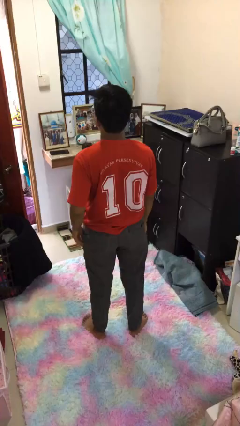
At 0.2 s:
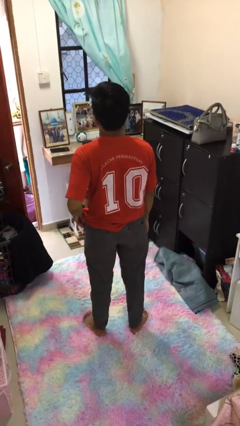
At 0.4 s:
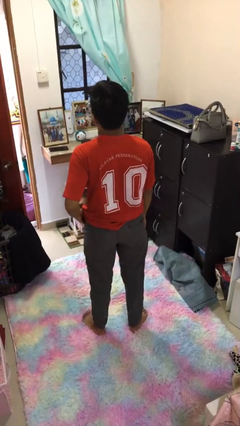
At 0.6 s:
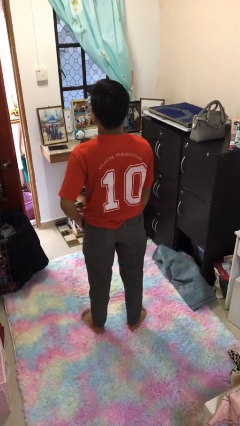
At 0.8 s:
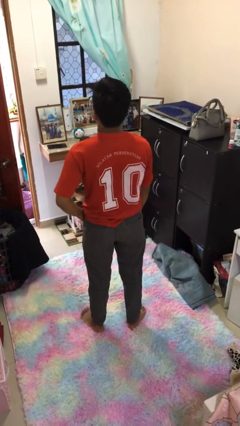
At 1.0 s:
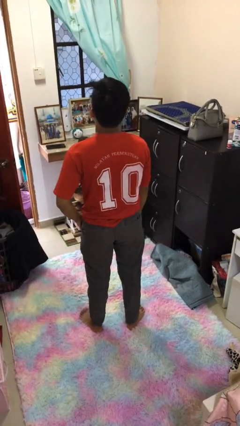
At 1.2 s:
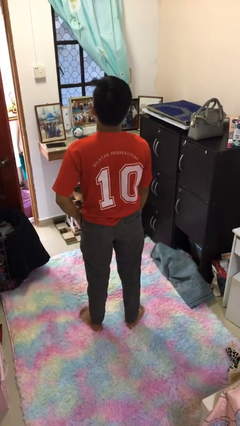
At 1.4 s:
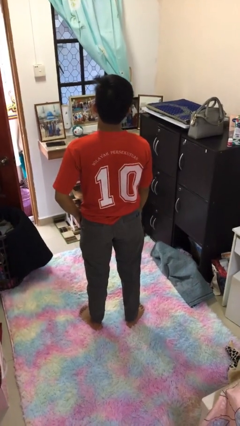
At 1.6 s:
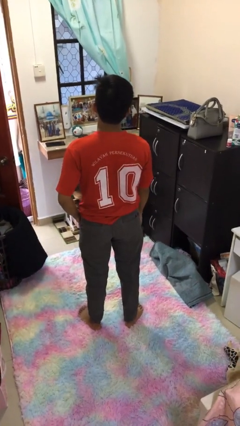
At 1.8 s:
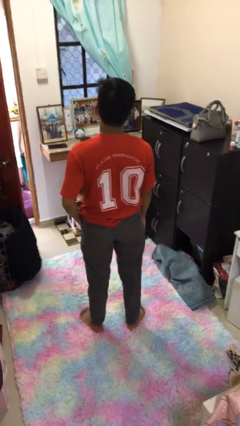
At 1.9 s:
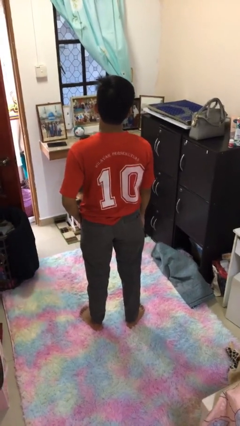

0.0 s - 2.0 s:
person puts hands in back pockets

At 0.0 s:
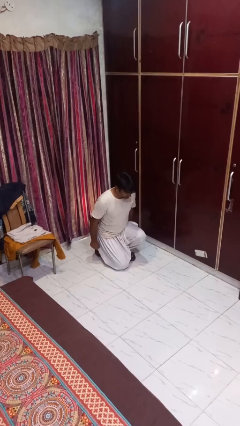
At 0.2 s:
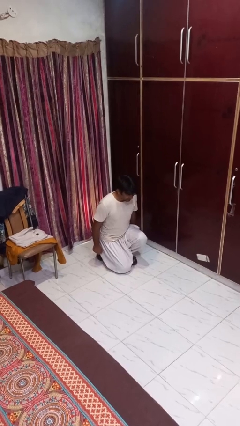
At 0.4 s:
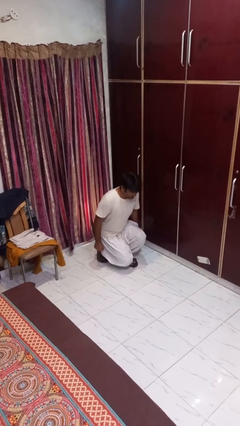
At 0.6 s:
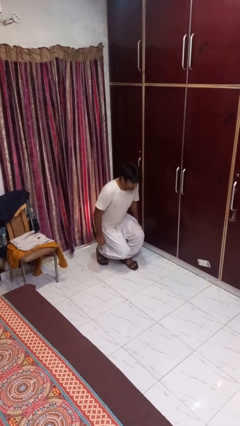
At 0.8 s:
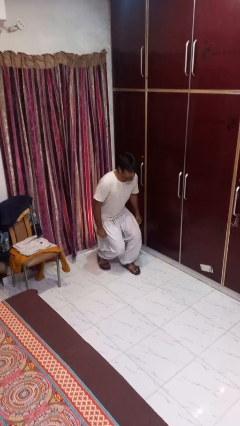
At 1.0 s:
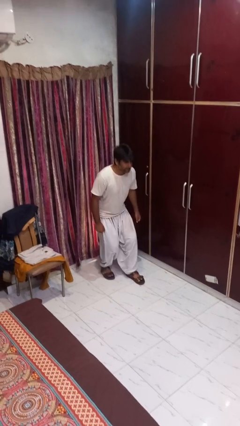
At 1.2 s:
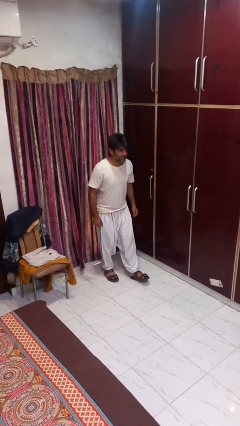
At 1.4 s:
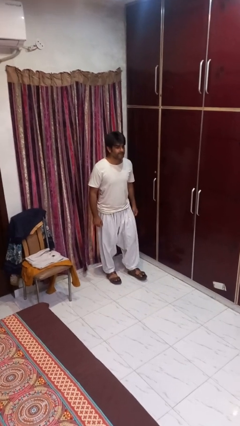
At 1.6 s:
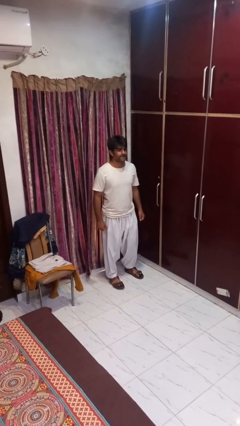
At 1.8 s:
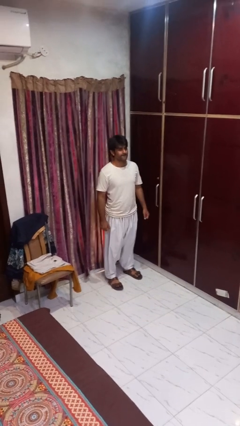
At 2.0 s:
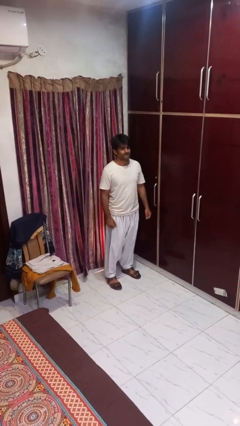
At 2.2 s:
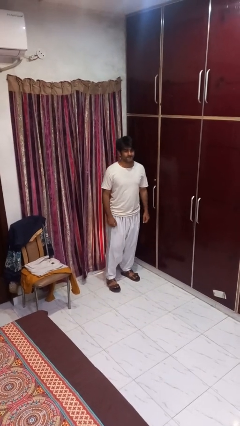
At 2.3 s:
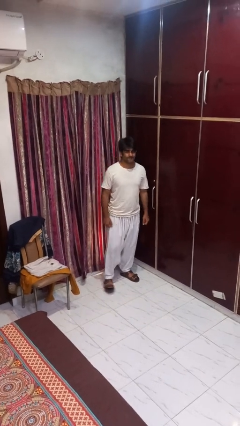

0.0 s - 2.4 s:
person stands up from floor

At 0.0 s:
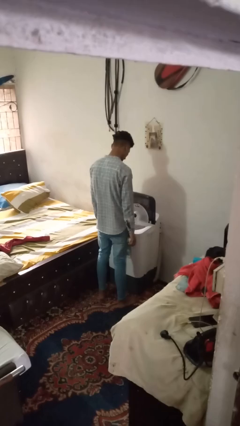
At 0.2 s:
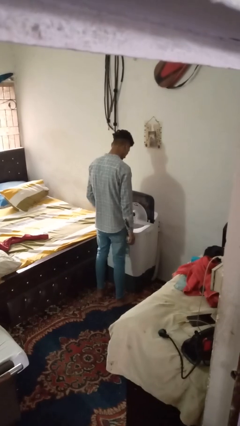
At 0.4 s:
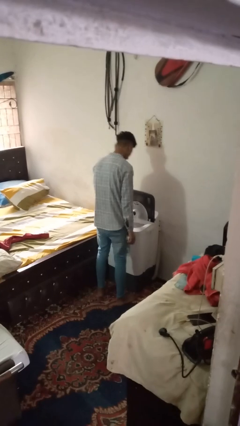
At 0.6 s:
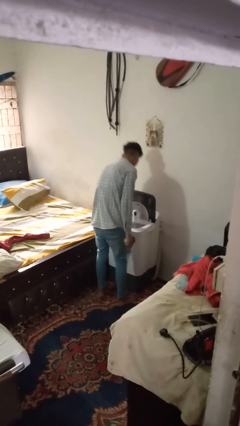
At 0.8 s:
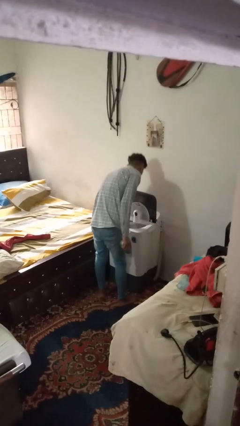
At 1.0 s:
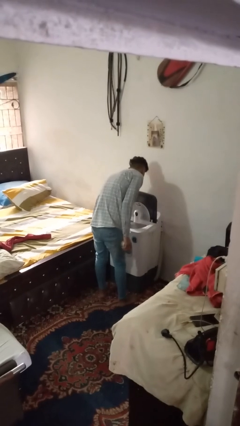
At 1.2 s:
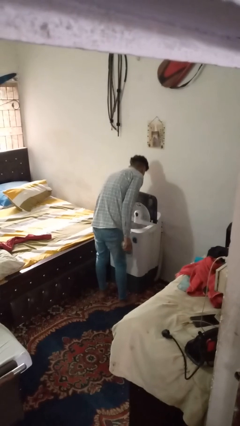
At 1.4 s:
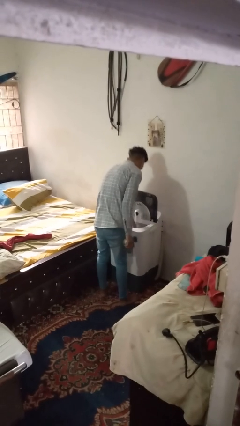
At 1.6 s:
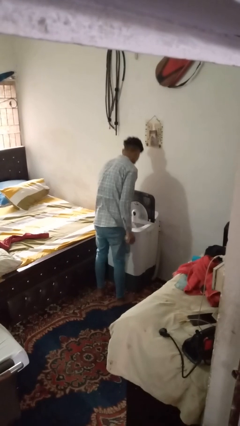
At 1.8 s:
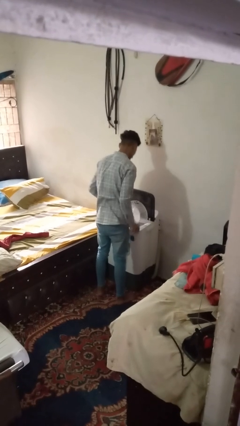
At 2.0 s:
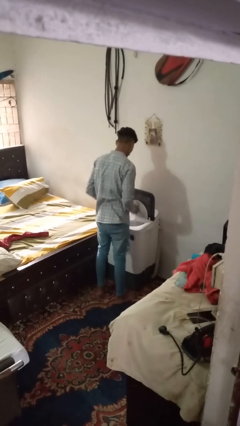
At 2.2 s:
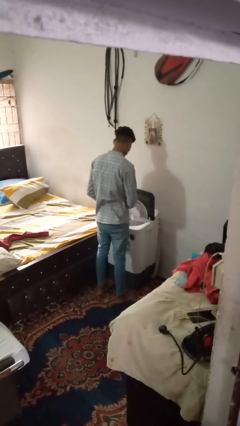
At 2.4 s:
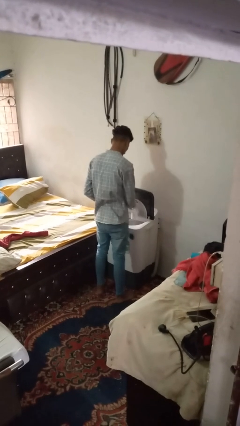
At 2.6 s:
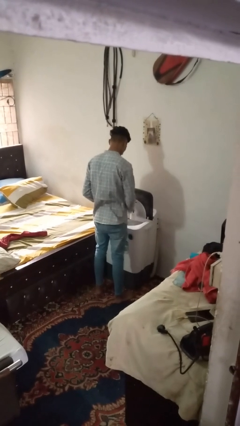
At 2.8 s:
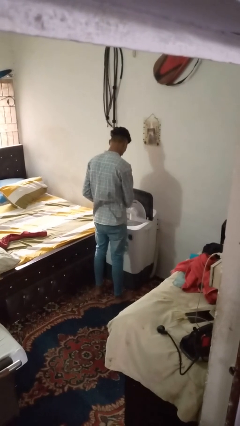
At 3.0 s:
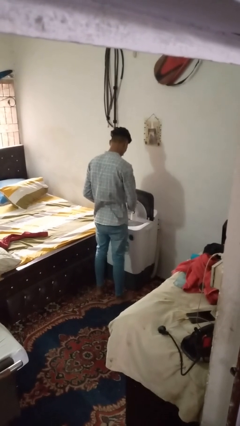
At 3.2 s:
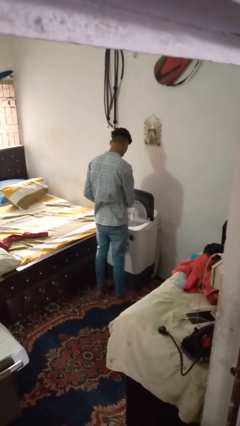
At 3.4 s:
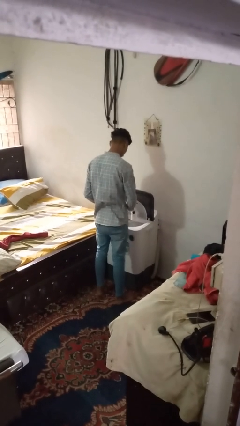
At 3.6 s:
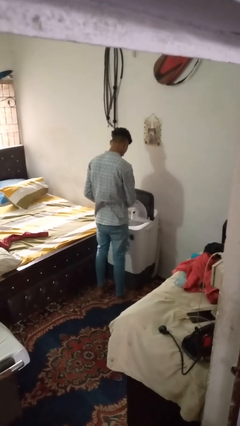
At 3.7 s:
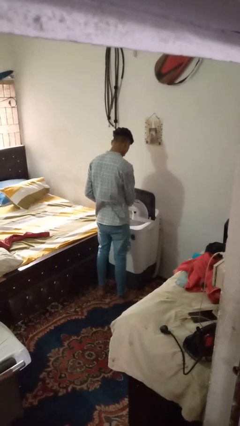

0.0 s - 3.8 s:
person cleans dryer lint trap

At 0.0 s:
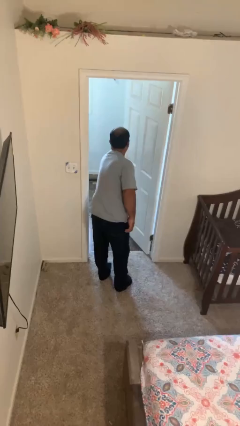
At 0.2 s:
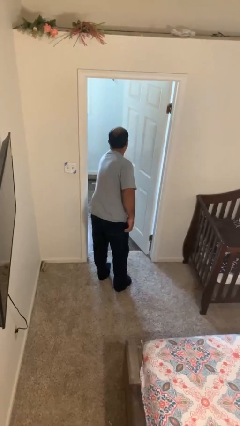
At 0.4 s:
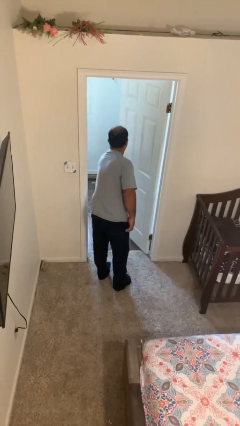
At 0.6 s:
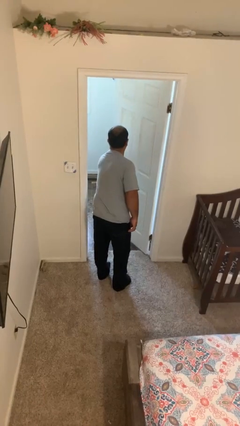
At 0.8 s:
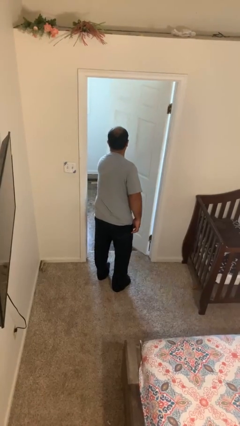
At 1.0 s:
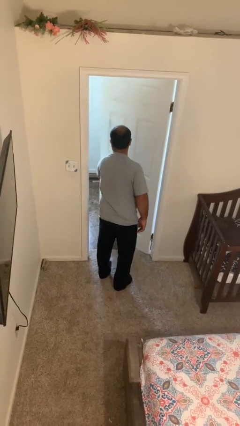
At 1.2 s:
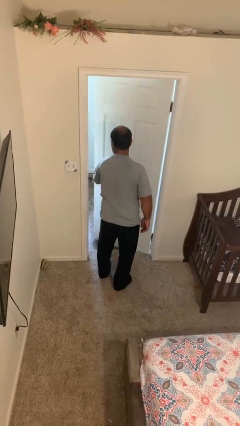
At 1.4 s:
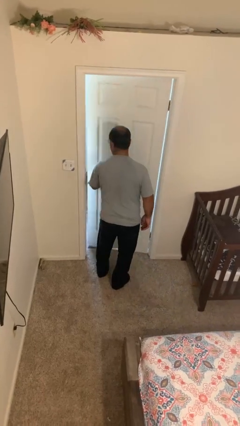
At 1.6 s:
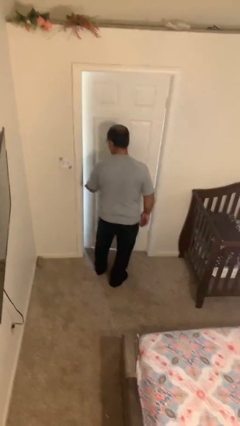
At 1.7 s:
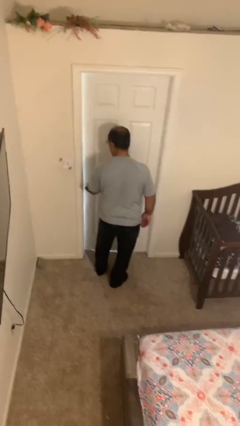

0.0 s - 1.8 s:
person closes facility door

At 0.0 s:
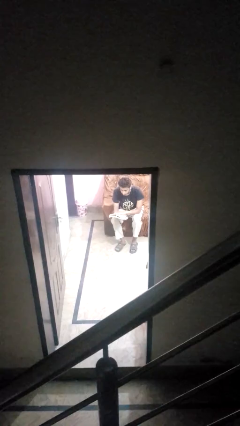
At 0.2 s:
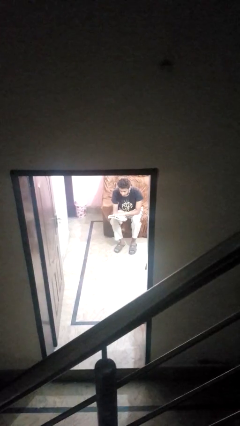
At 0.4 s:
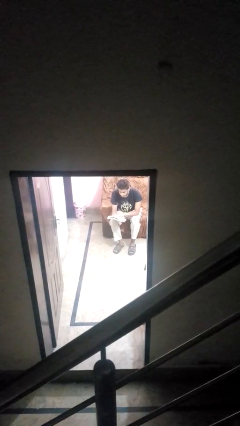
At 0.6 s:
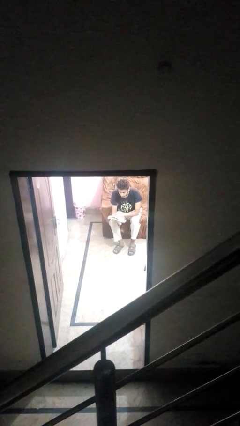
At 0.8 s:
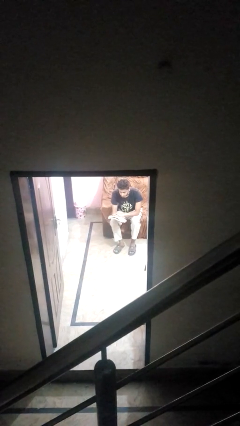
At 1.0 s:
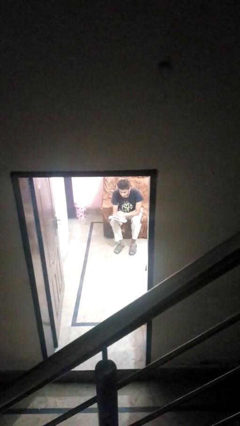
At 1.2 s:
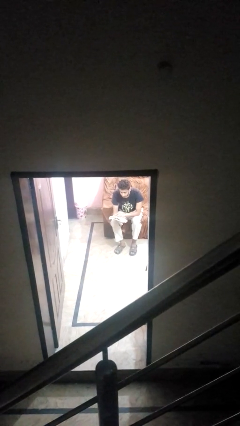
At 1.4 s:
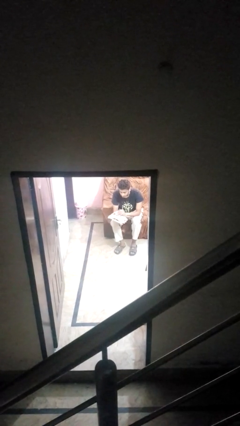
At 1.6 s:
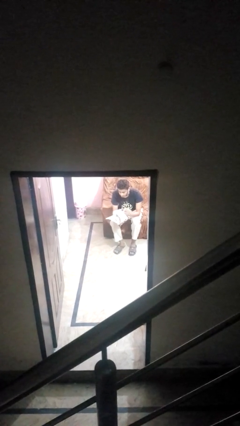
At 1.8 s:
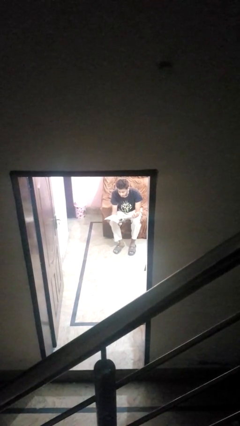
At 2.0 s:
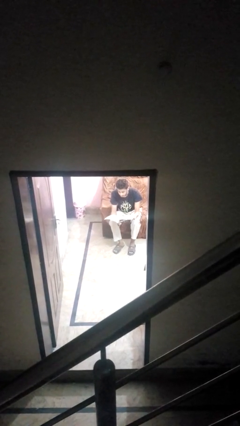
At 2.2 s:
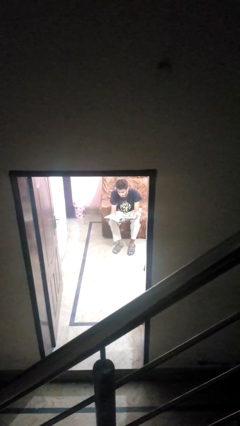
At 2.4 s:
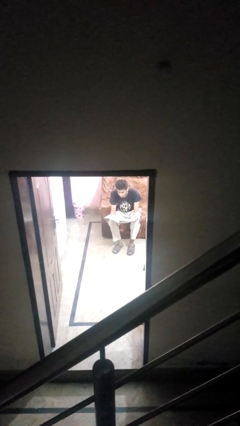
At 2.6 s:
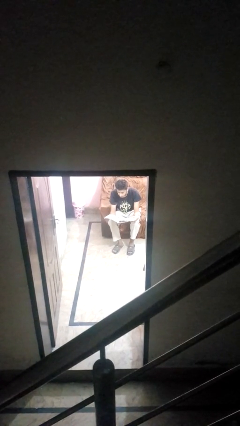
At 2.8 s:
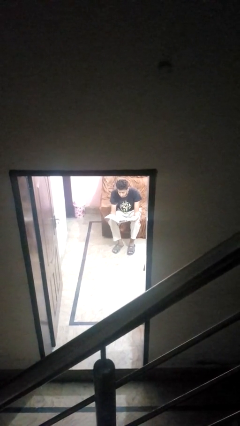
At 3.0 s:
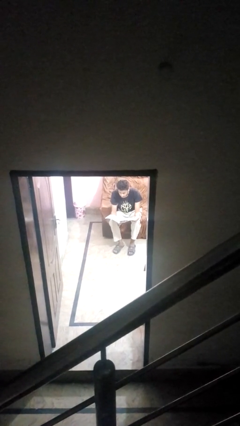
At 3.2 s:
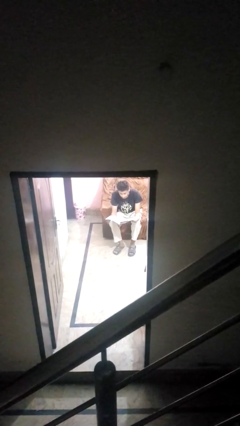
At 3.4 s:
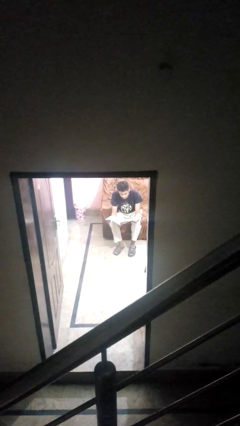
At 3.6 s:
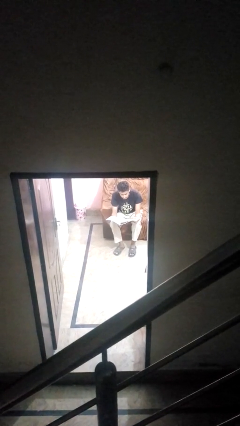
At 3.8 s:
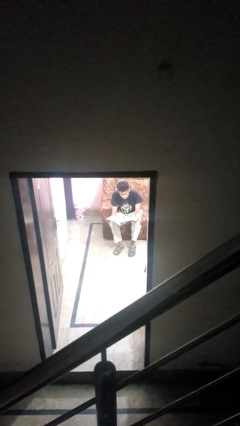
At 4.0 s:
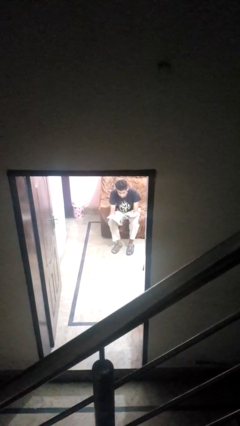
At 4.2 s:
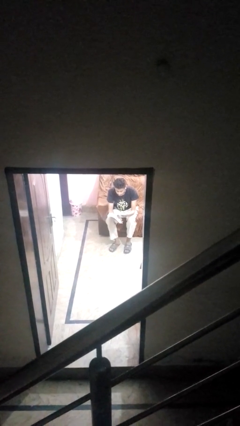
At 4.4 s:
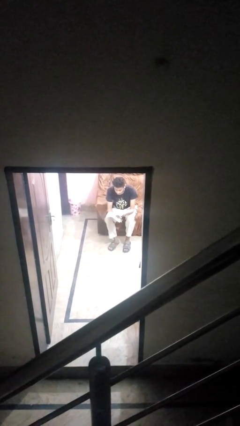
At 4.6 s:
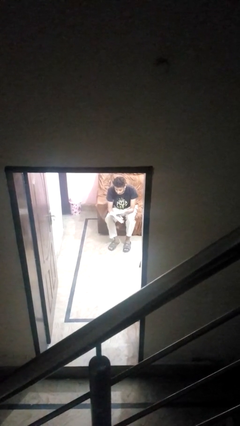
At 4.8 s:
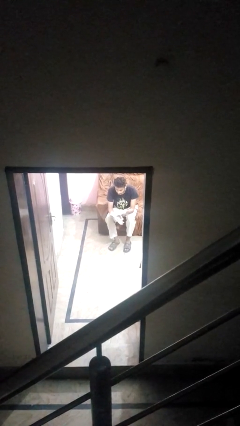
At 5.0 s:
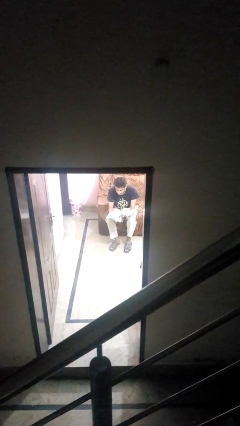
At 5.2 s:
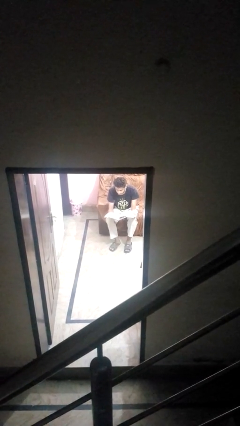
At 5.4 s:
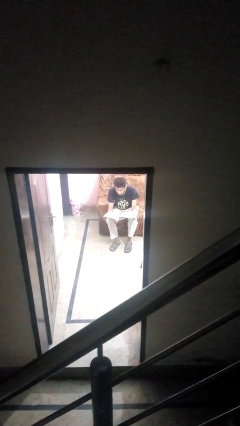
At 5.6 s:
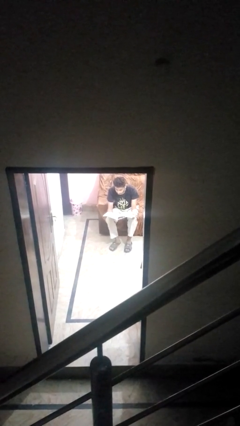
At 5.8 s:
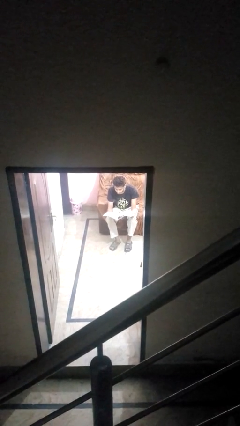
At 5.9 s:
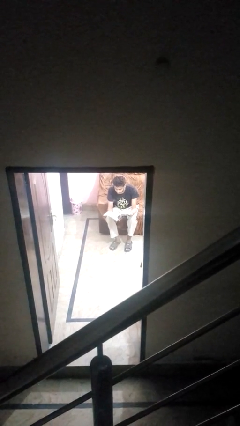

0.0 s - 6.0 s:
person reads magazine

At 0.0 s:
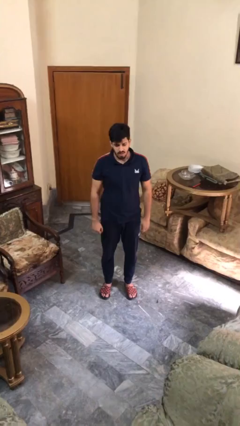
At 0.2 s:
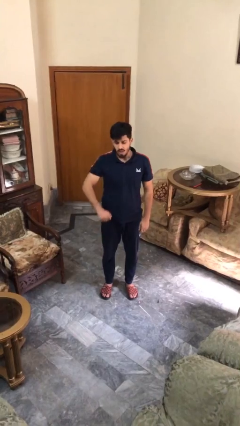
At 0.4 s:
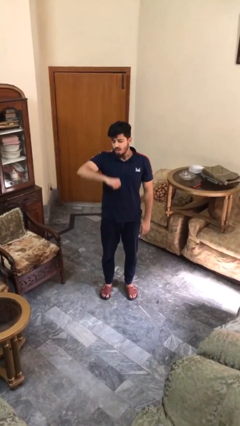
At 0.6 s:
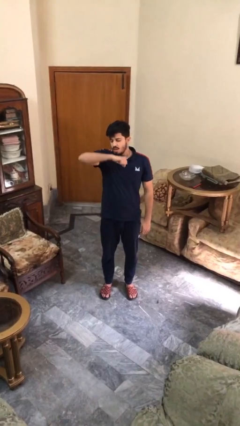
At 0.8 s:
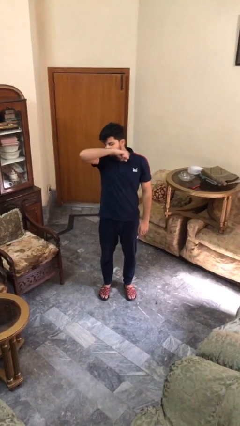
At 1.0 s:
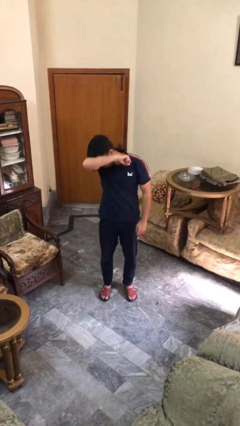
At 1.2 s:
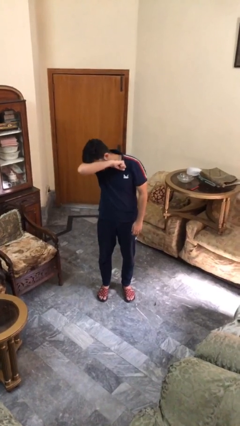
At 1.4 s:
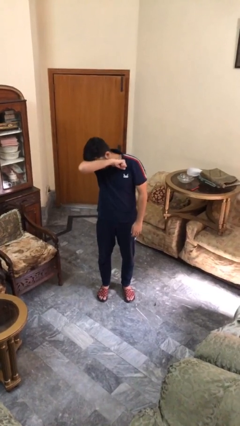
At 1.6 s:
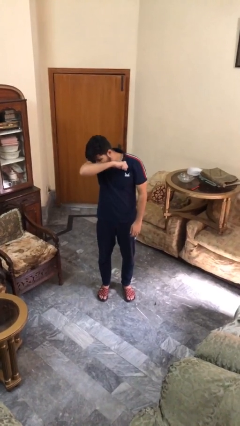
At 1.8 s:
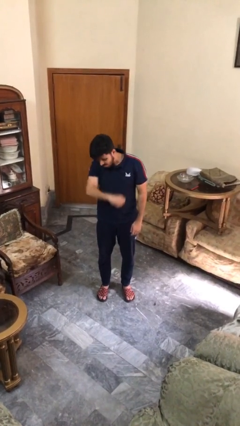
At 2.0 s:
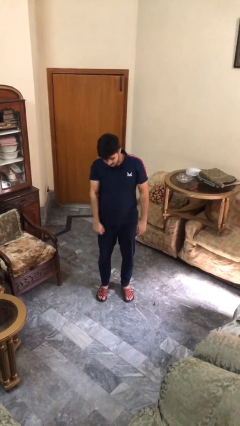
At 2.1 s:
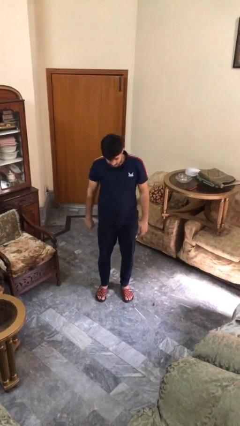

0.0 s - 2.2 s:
person sneezes into arm
